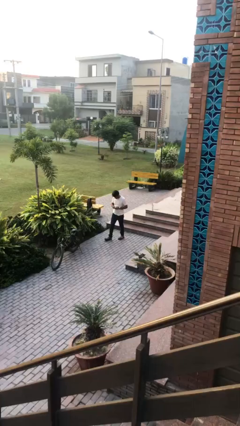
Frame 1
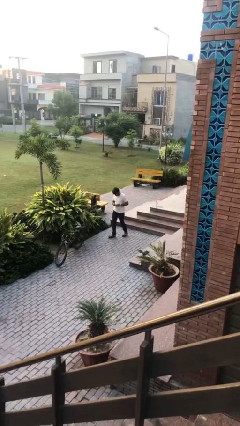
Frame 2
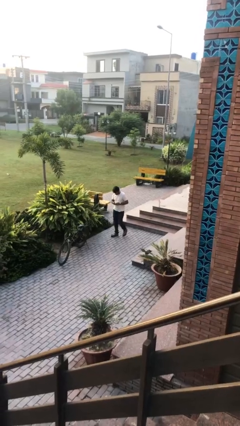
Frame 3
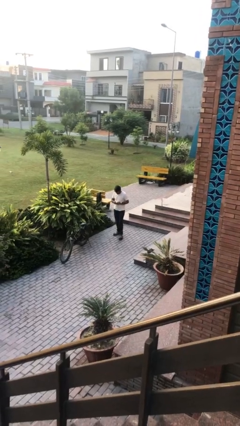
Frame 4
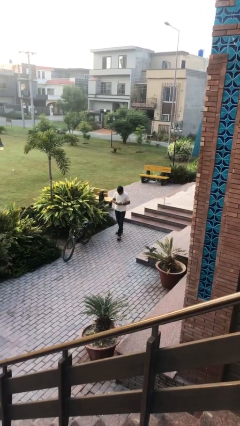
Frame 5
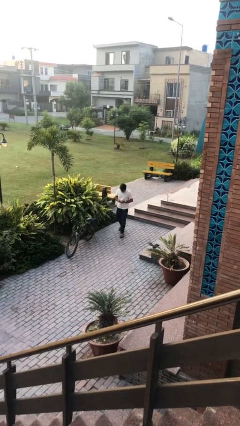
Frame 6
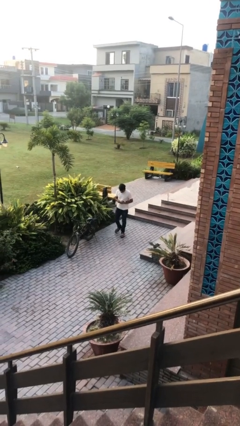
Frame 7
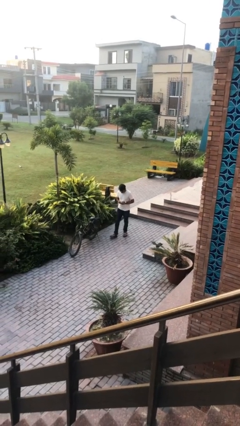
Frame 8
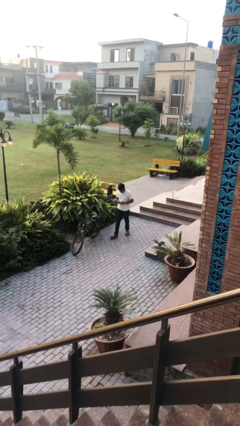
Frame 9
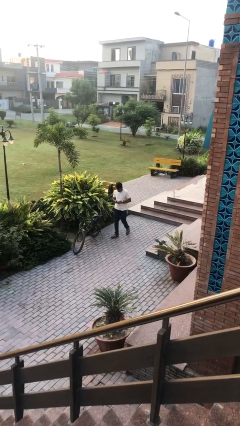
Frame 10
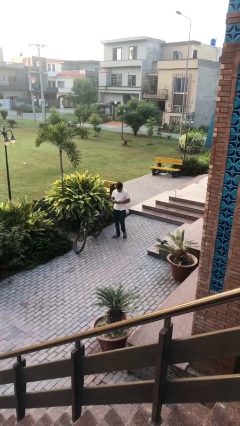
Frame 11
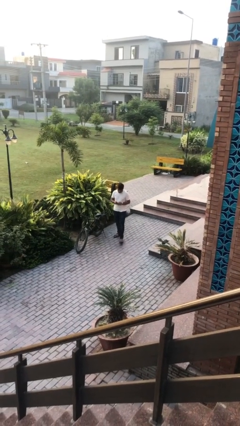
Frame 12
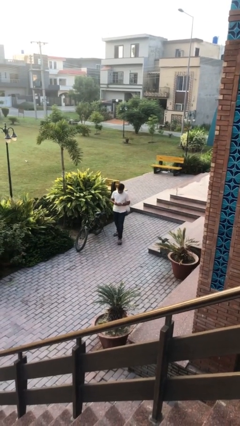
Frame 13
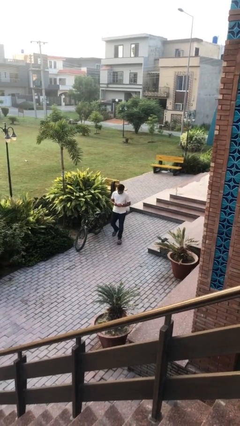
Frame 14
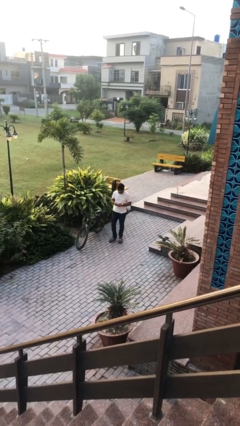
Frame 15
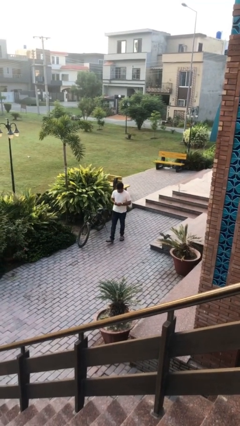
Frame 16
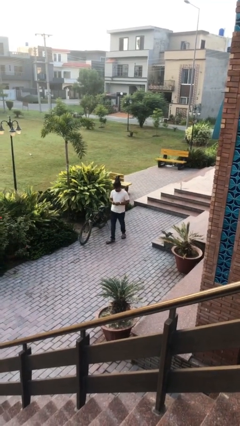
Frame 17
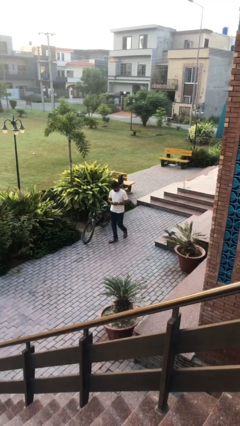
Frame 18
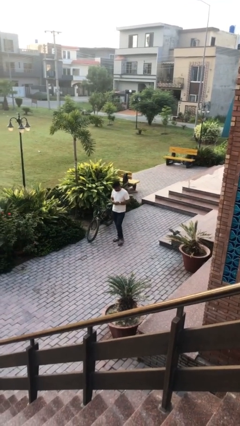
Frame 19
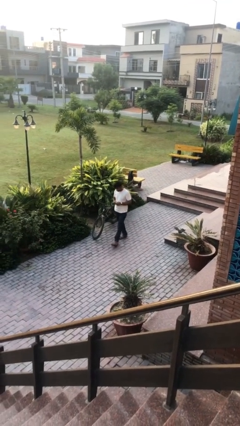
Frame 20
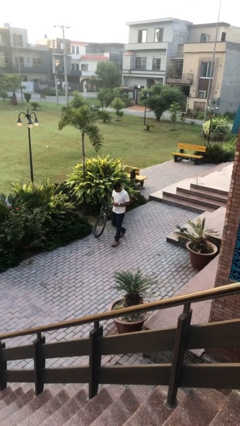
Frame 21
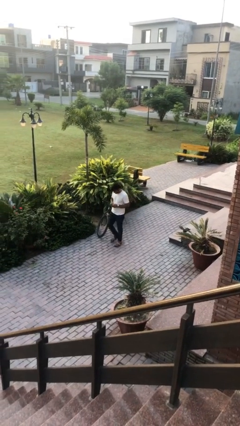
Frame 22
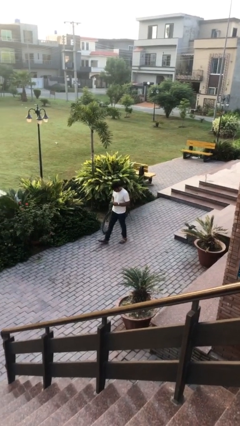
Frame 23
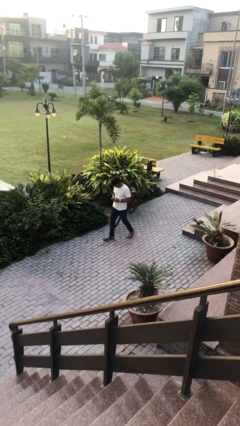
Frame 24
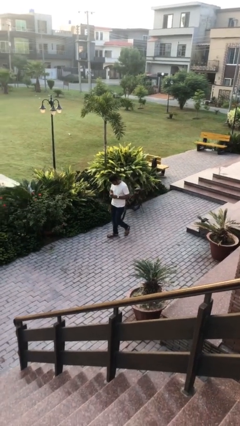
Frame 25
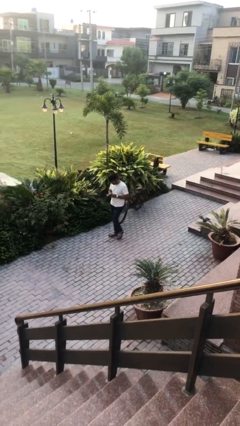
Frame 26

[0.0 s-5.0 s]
person texts on phone

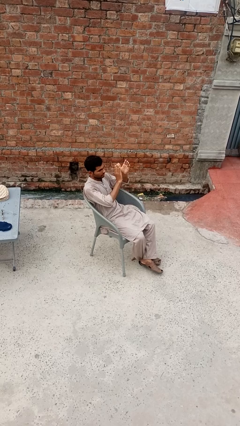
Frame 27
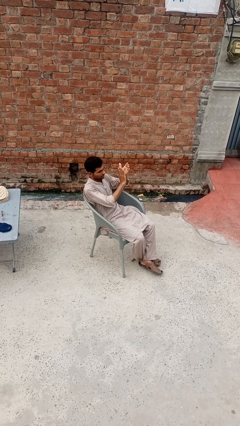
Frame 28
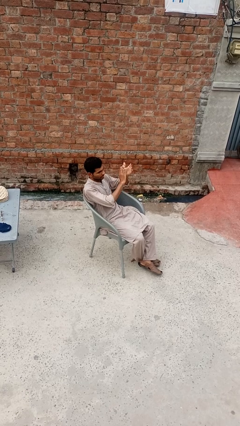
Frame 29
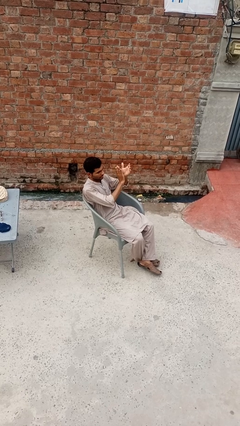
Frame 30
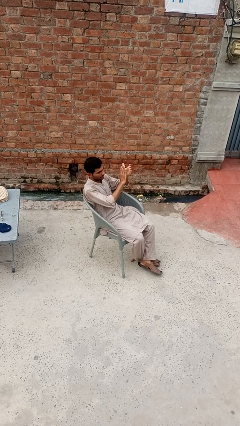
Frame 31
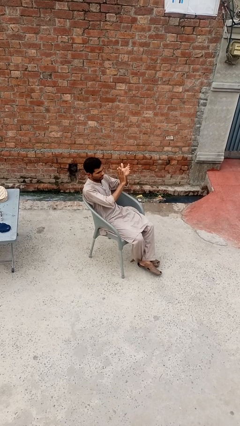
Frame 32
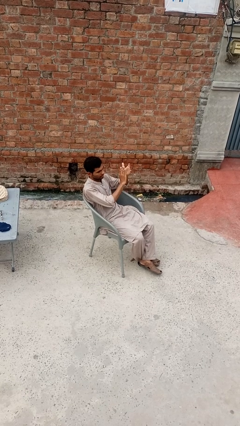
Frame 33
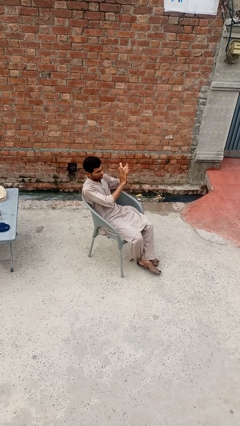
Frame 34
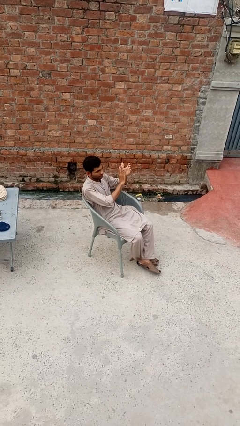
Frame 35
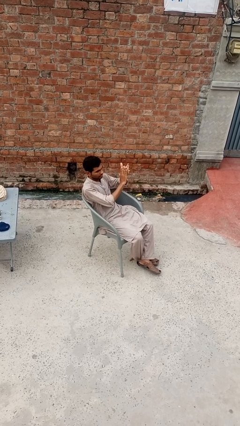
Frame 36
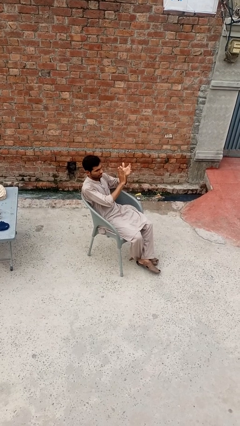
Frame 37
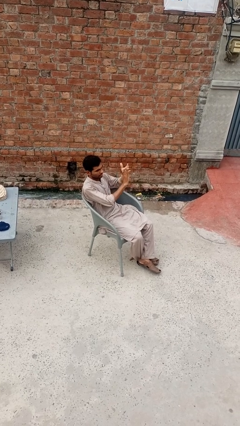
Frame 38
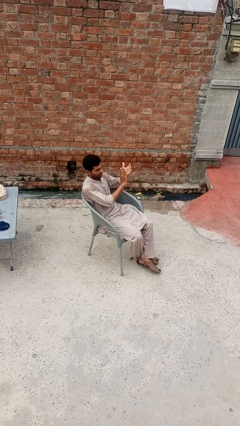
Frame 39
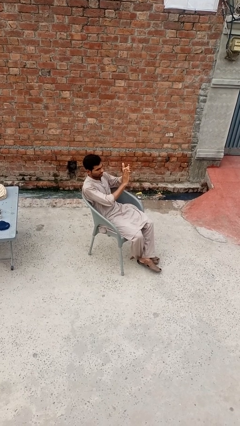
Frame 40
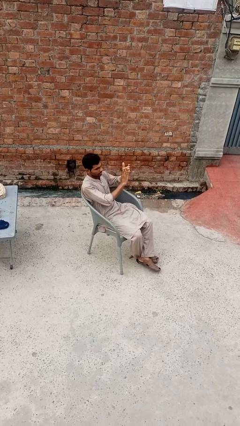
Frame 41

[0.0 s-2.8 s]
person claps hands

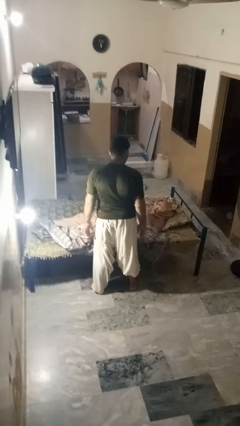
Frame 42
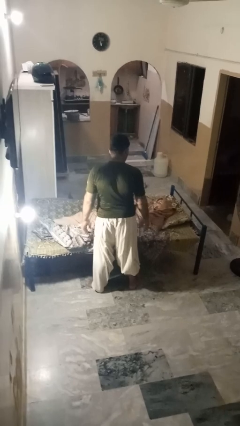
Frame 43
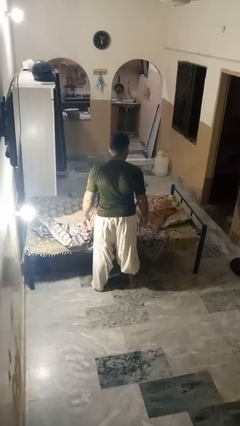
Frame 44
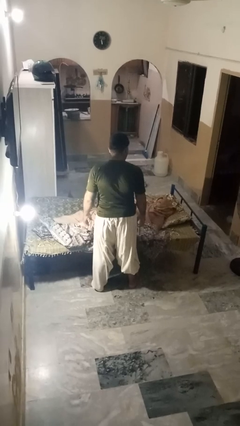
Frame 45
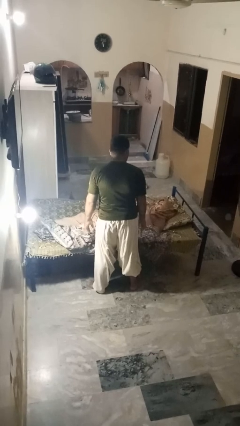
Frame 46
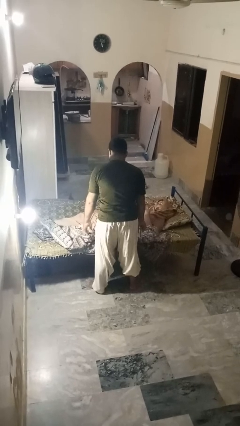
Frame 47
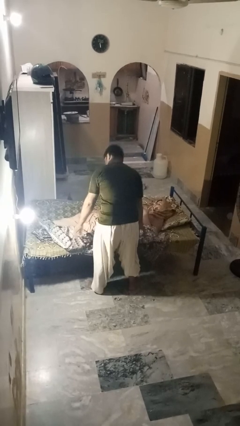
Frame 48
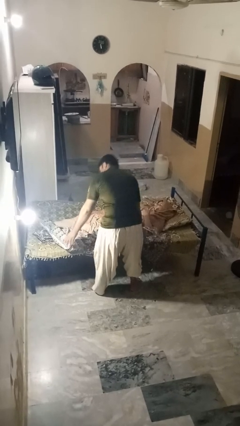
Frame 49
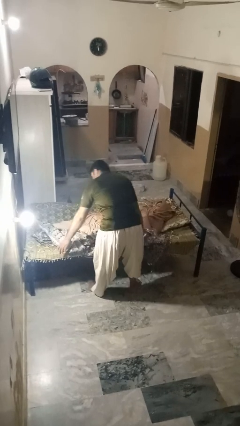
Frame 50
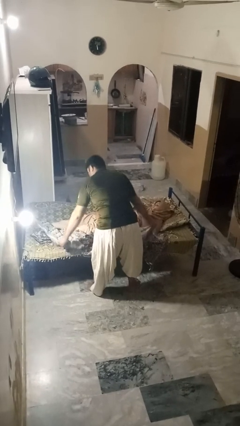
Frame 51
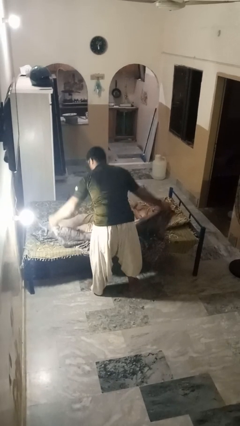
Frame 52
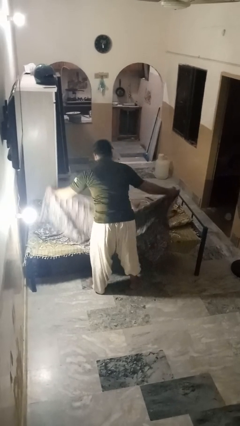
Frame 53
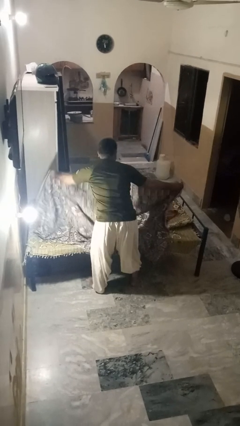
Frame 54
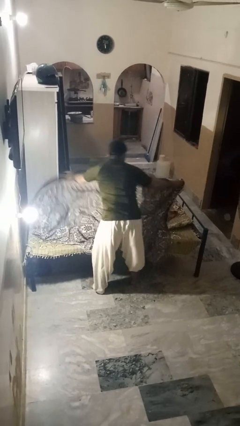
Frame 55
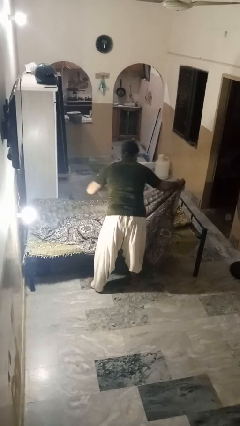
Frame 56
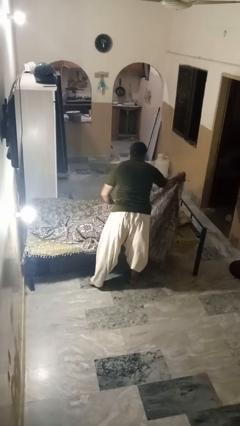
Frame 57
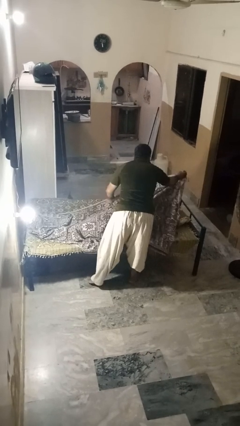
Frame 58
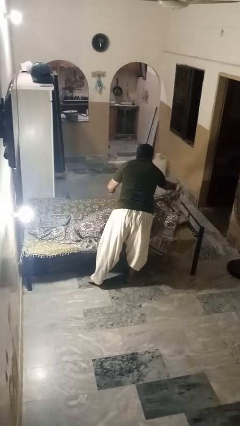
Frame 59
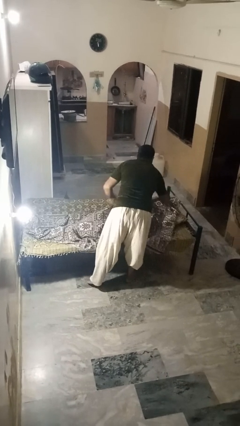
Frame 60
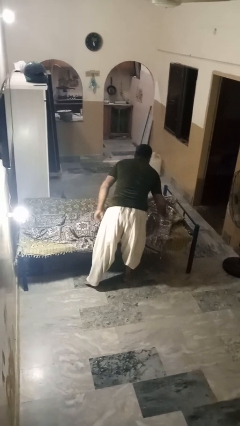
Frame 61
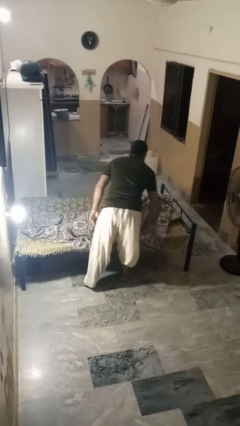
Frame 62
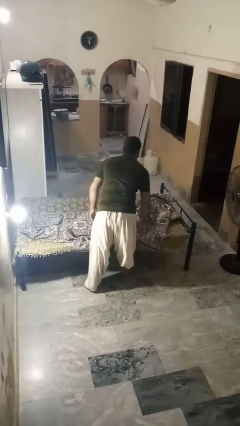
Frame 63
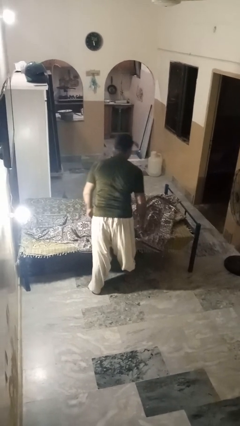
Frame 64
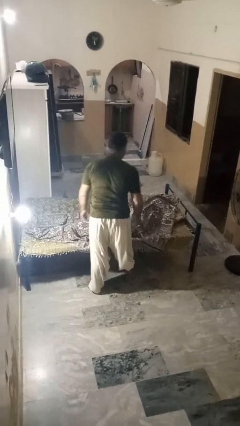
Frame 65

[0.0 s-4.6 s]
person covers friend with blanket

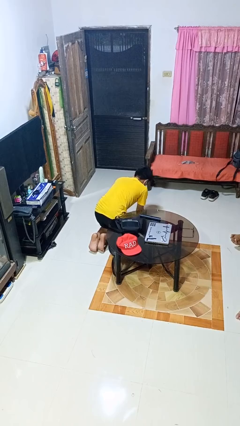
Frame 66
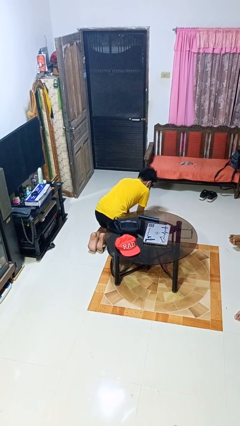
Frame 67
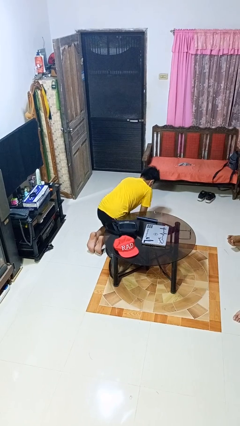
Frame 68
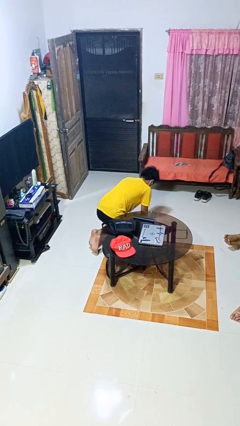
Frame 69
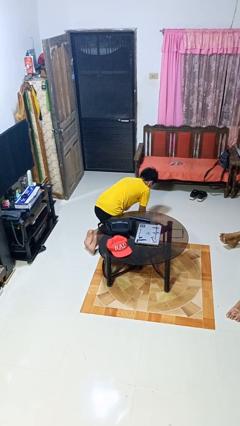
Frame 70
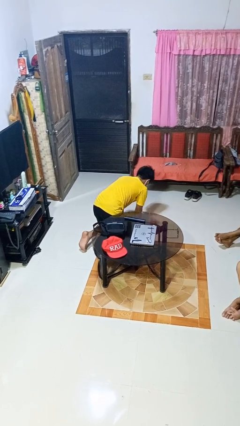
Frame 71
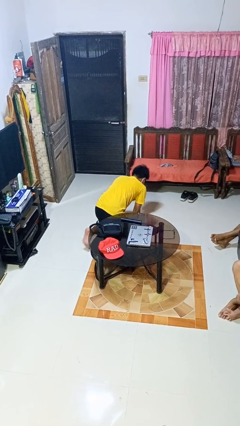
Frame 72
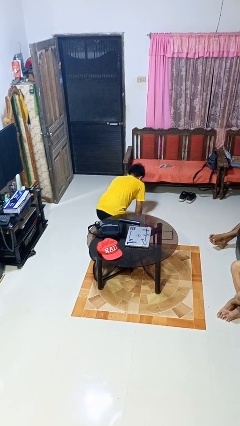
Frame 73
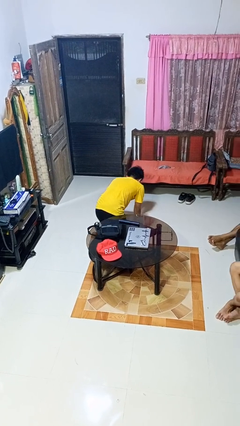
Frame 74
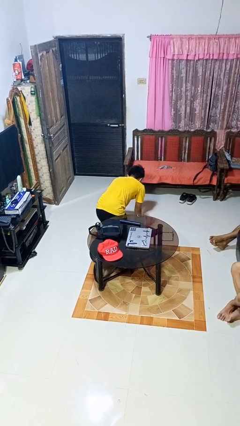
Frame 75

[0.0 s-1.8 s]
person crawls

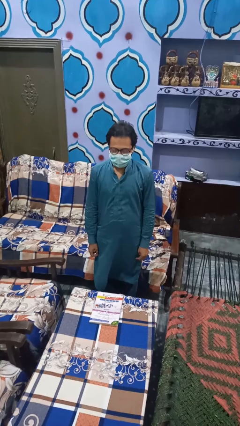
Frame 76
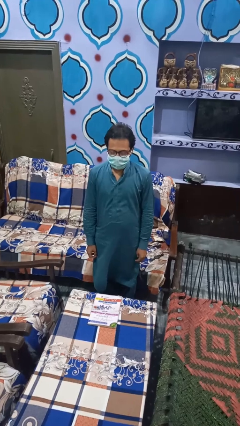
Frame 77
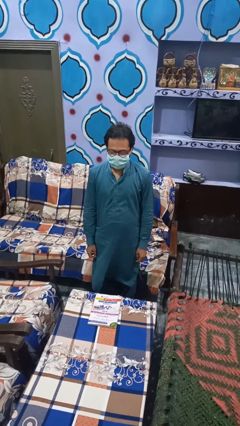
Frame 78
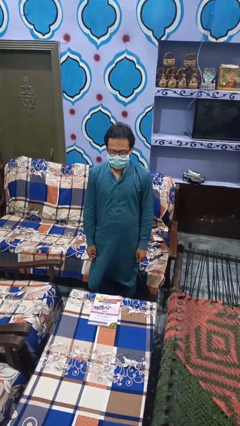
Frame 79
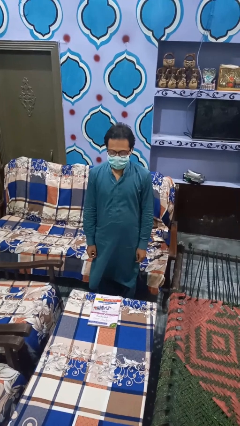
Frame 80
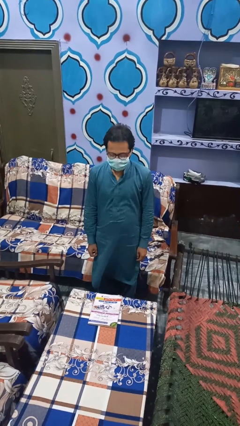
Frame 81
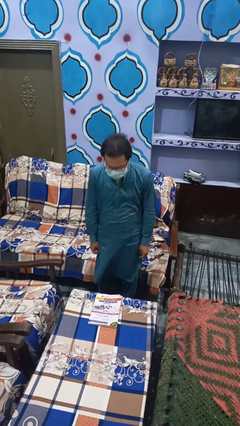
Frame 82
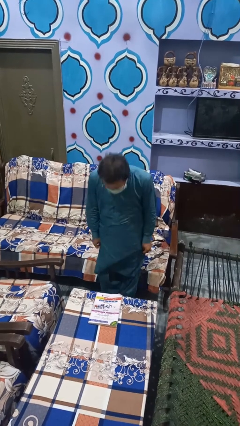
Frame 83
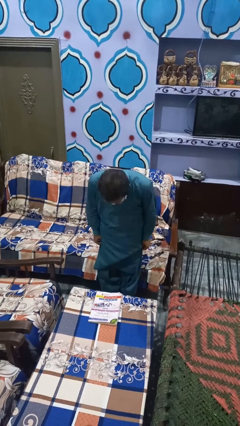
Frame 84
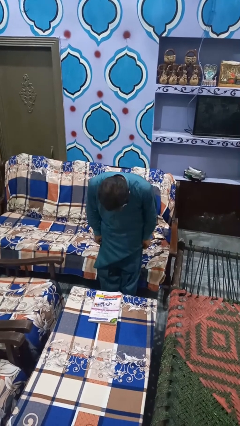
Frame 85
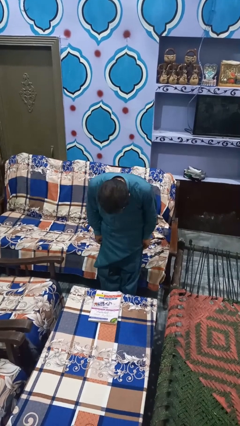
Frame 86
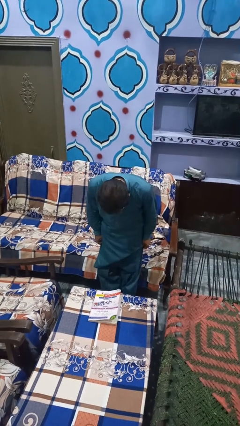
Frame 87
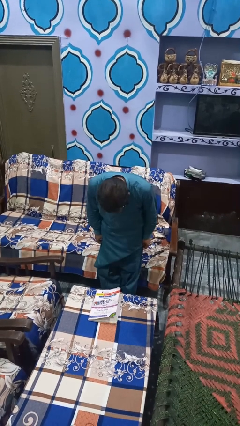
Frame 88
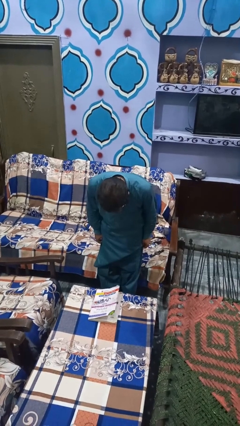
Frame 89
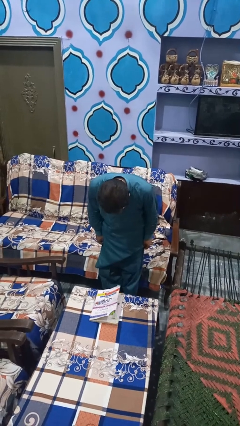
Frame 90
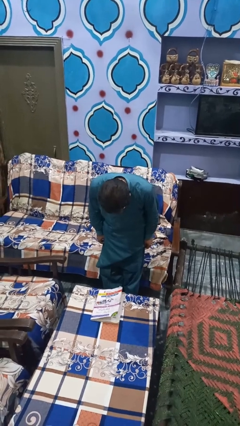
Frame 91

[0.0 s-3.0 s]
person bows

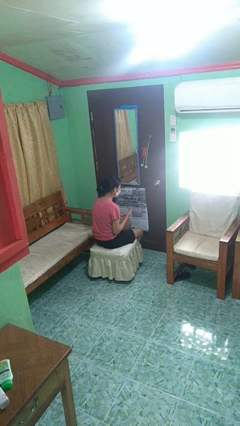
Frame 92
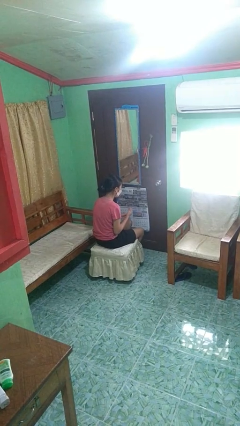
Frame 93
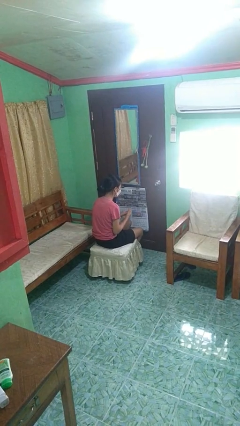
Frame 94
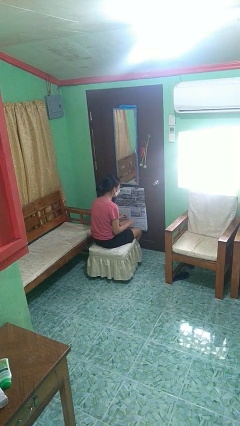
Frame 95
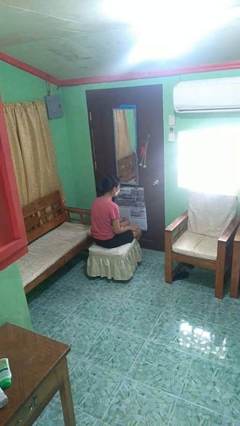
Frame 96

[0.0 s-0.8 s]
person takes off ring
